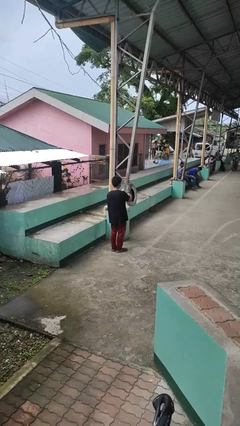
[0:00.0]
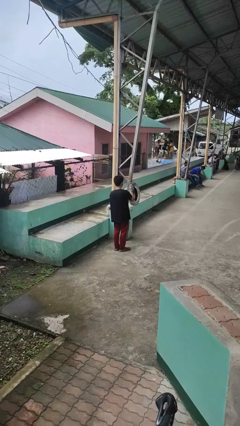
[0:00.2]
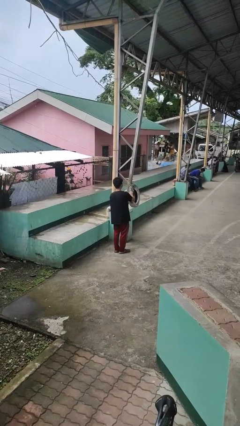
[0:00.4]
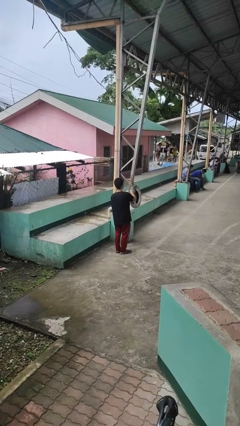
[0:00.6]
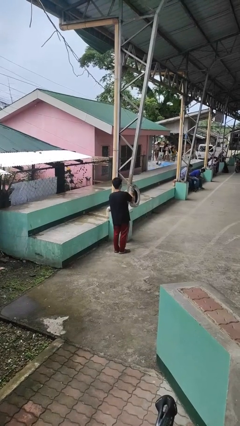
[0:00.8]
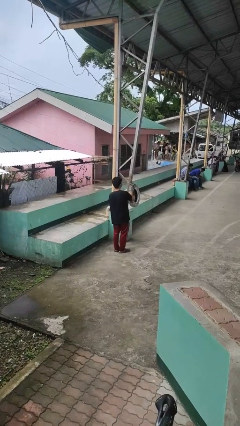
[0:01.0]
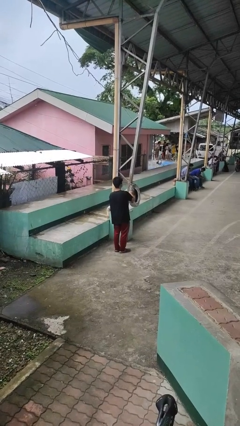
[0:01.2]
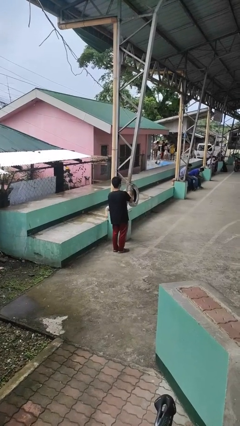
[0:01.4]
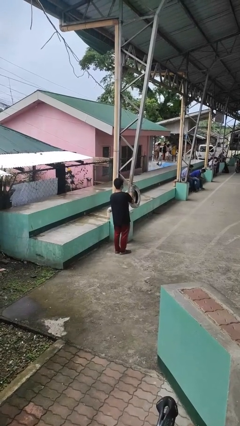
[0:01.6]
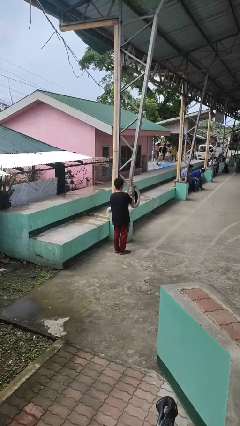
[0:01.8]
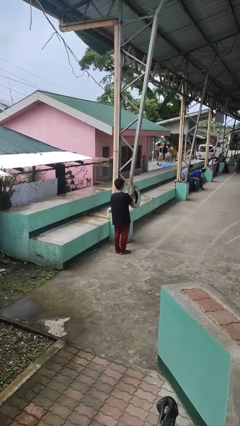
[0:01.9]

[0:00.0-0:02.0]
person taps object with finger

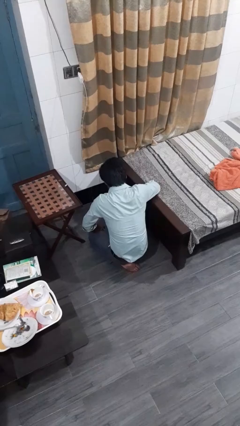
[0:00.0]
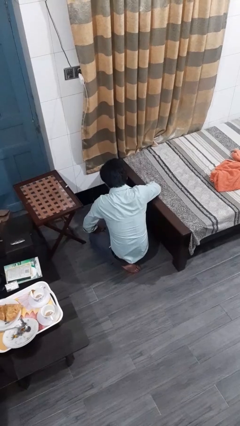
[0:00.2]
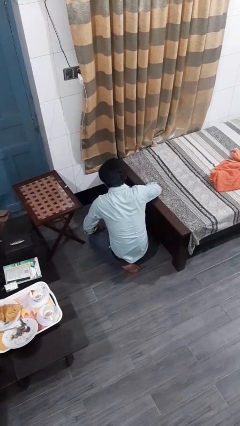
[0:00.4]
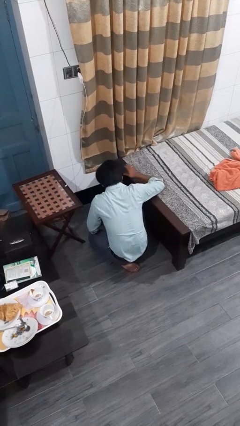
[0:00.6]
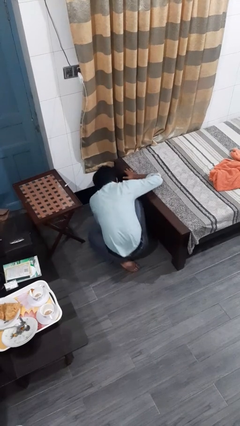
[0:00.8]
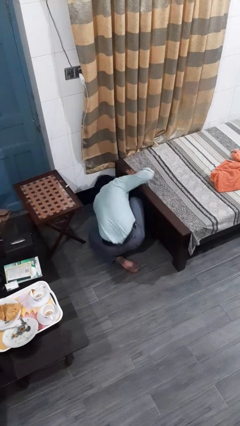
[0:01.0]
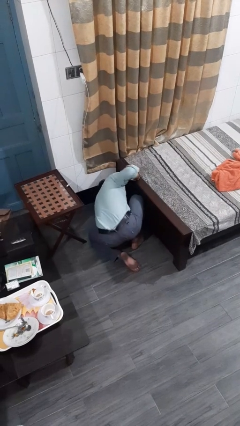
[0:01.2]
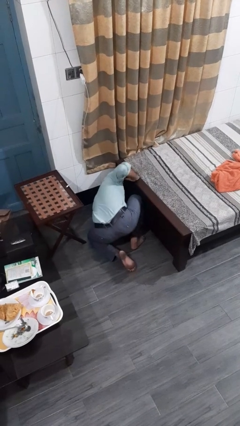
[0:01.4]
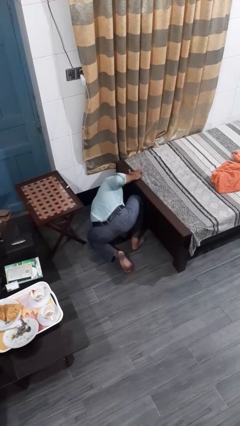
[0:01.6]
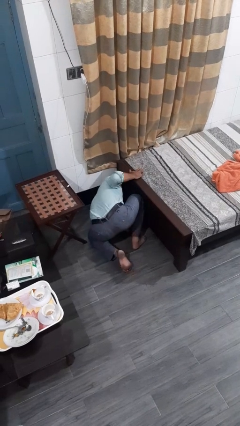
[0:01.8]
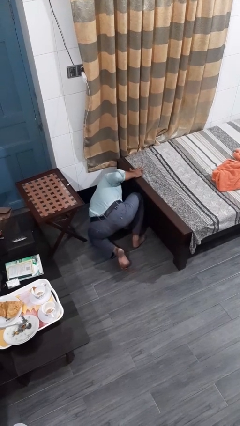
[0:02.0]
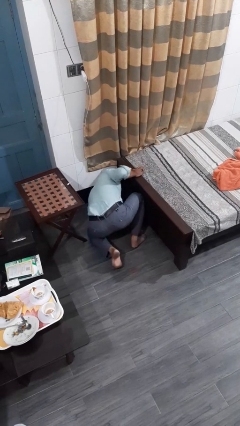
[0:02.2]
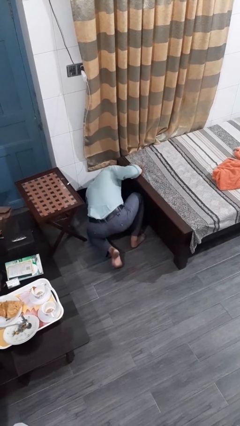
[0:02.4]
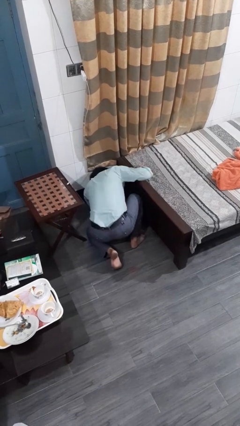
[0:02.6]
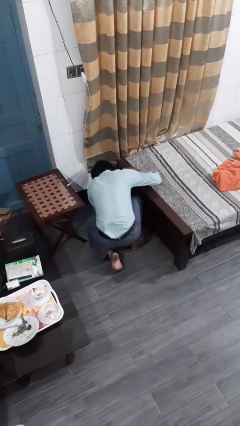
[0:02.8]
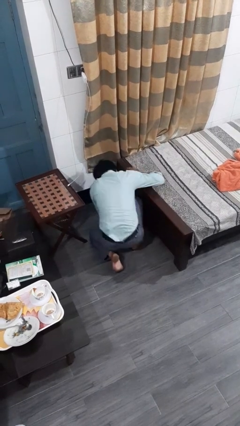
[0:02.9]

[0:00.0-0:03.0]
person searches under bed

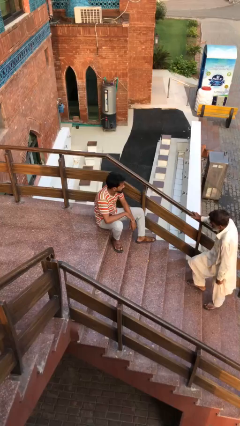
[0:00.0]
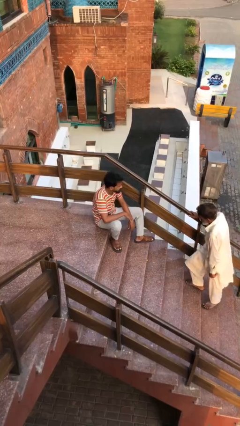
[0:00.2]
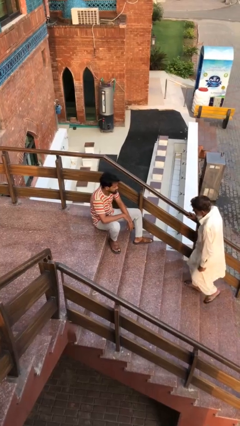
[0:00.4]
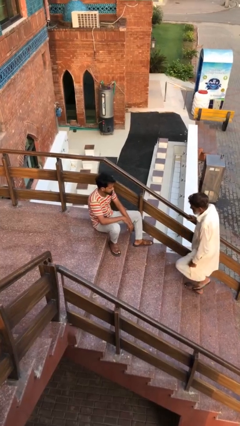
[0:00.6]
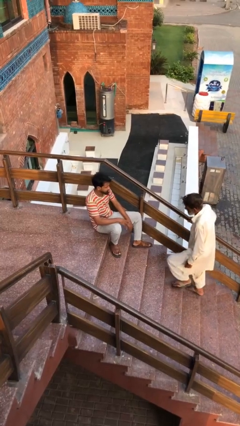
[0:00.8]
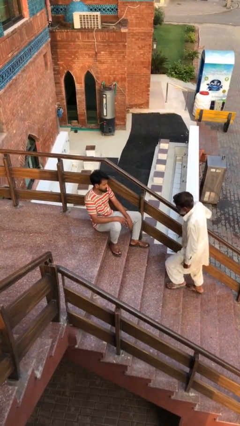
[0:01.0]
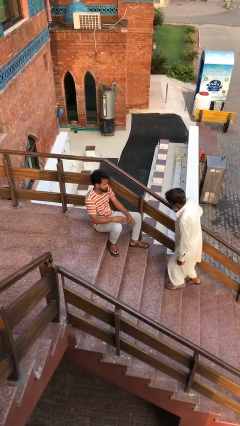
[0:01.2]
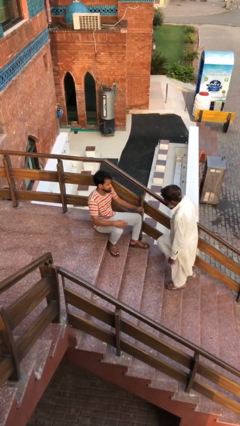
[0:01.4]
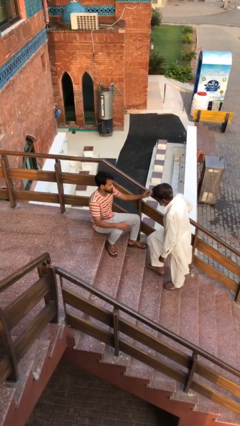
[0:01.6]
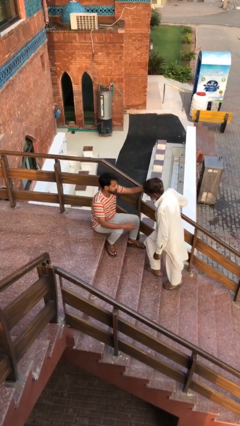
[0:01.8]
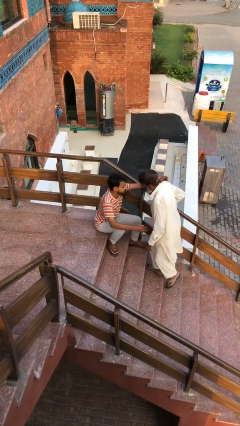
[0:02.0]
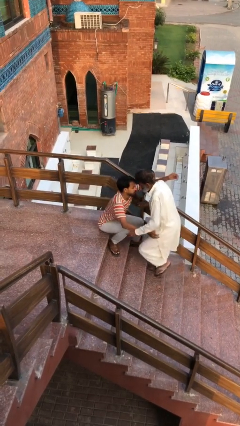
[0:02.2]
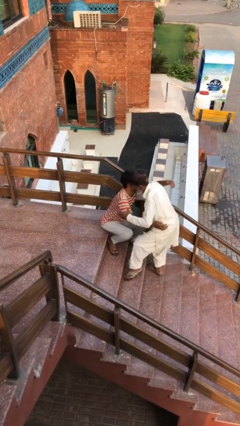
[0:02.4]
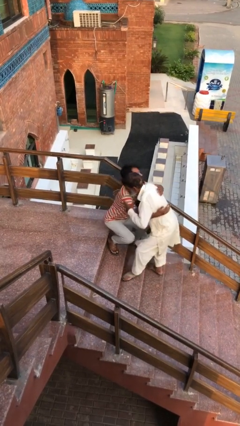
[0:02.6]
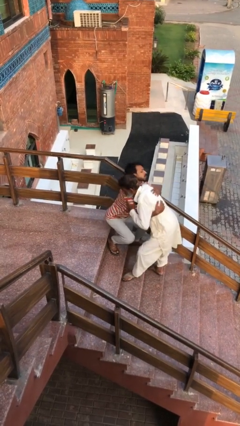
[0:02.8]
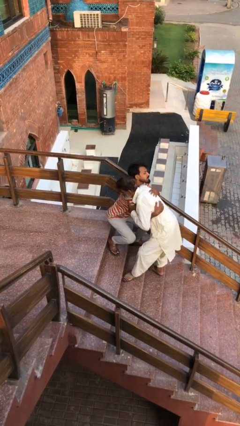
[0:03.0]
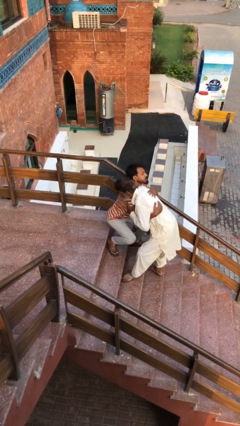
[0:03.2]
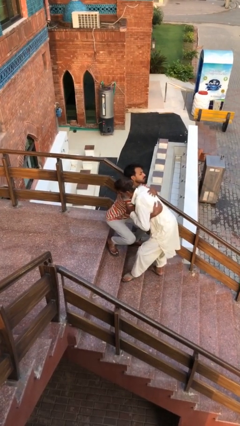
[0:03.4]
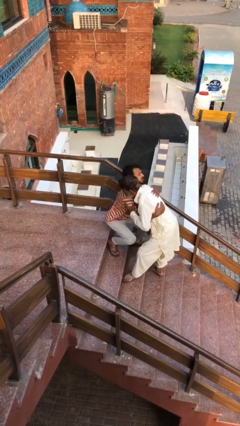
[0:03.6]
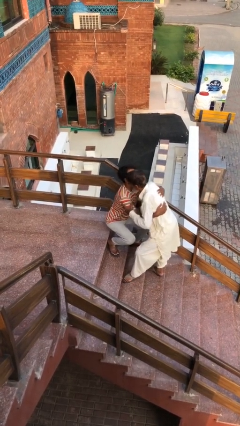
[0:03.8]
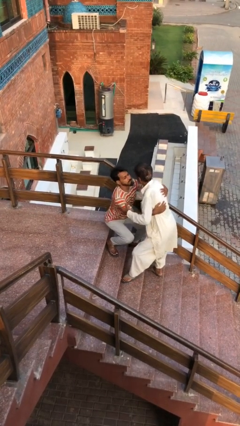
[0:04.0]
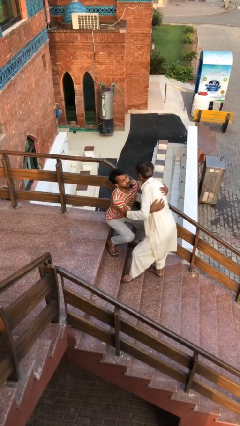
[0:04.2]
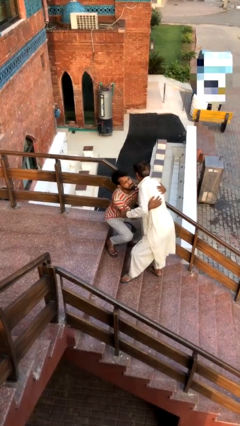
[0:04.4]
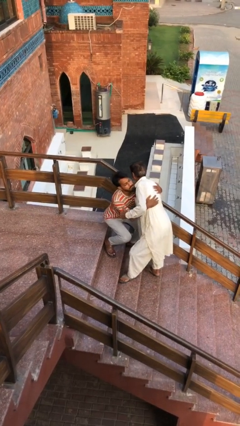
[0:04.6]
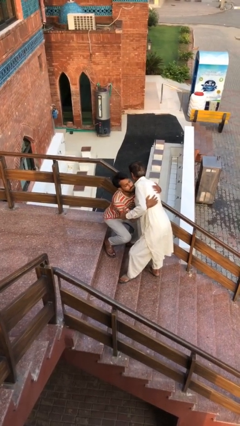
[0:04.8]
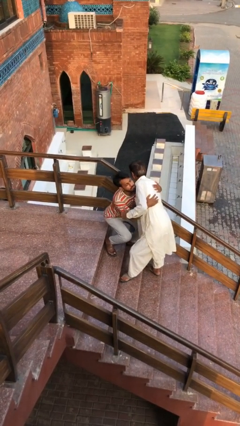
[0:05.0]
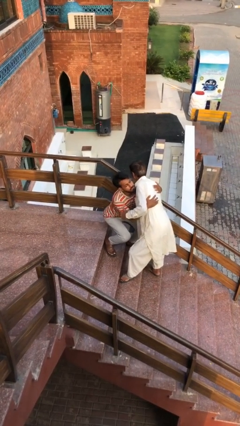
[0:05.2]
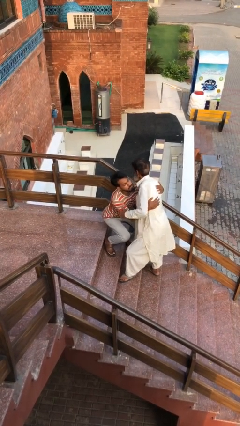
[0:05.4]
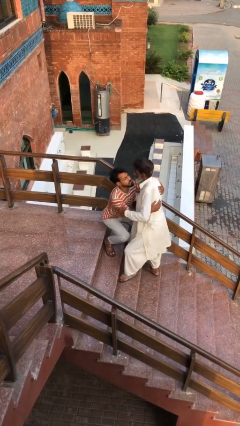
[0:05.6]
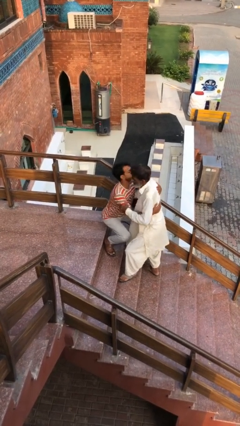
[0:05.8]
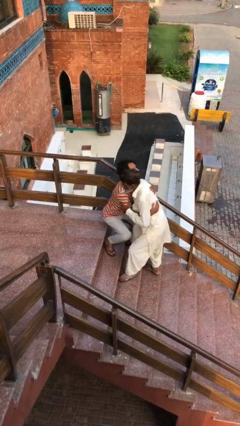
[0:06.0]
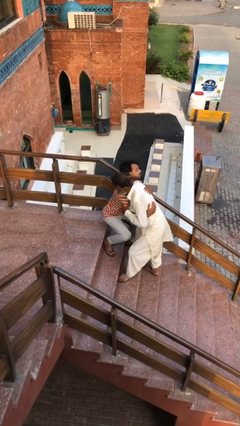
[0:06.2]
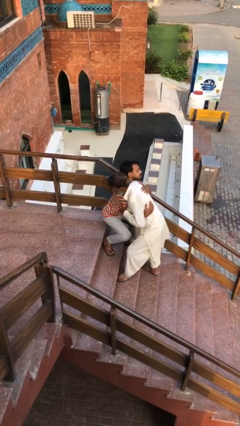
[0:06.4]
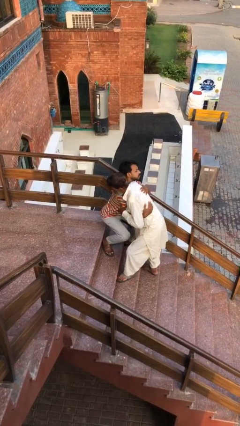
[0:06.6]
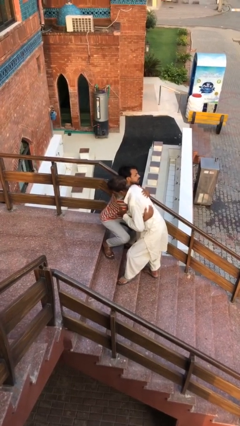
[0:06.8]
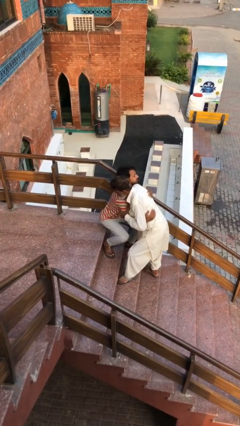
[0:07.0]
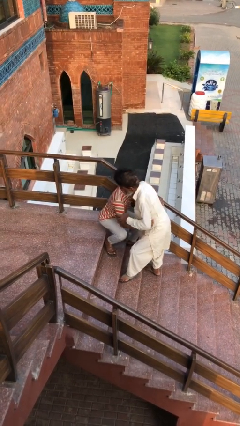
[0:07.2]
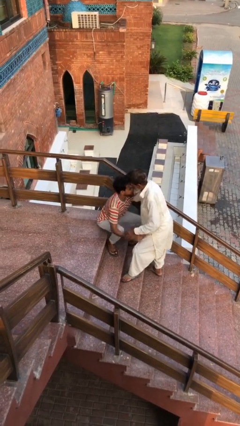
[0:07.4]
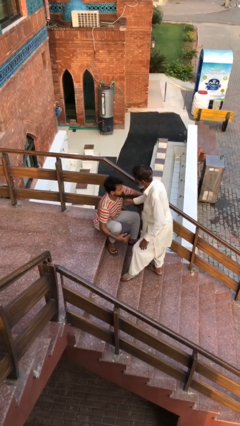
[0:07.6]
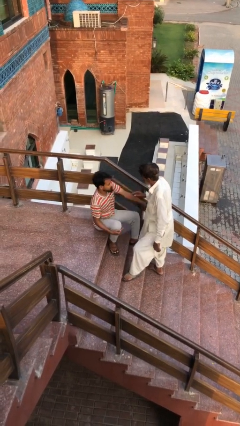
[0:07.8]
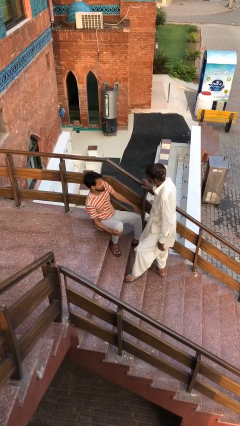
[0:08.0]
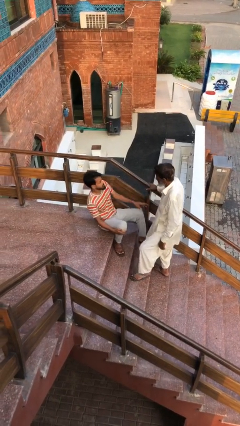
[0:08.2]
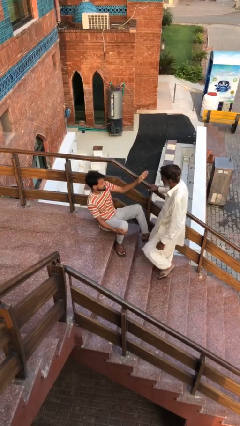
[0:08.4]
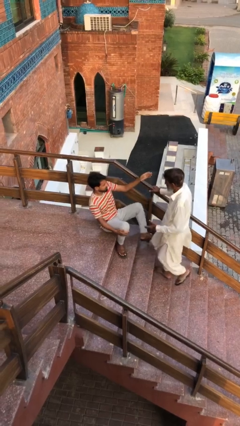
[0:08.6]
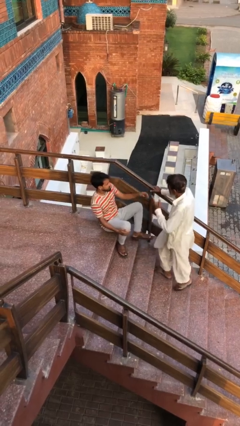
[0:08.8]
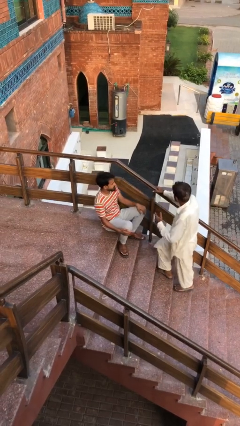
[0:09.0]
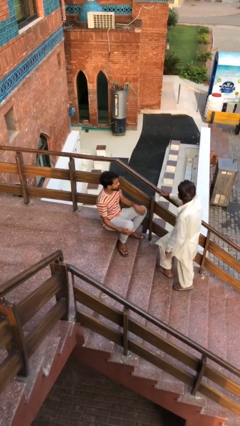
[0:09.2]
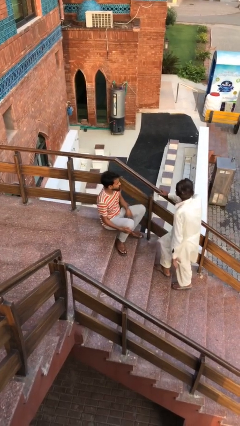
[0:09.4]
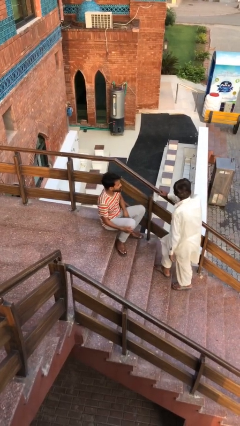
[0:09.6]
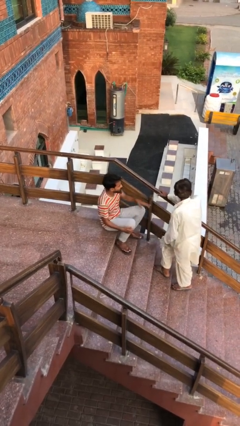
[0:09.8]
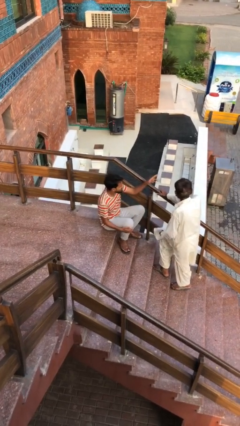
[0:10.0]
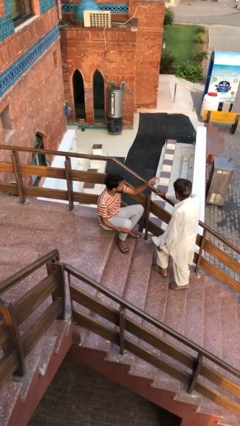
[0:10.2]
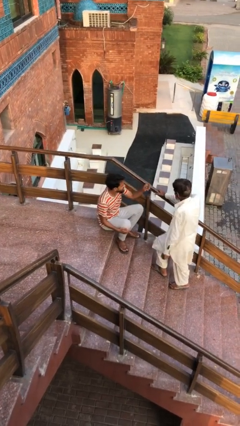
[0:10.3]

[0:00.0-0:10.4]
person embraces person

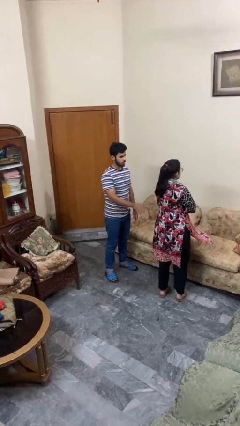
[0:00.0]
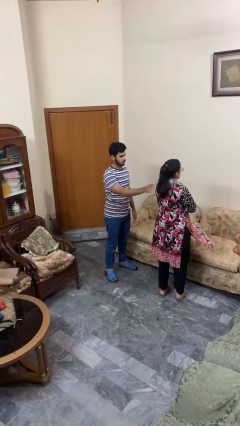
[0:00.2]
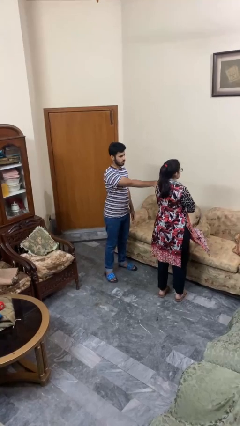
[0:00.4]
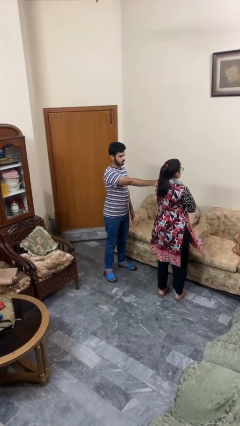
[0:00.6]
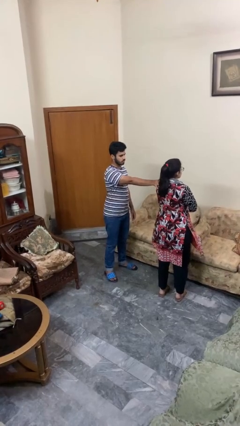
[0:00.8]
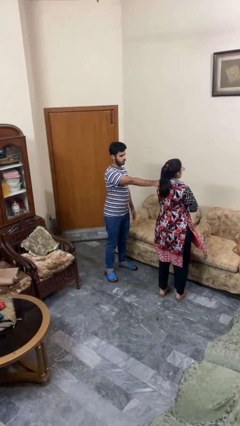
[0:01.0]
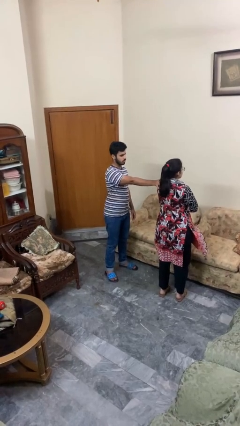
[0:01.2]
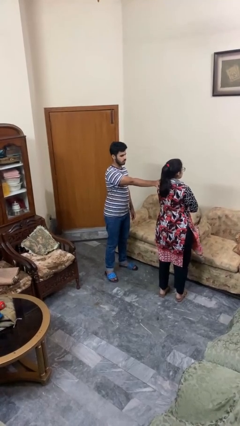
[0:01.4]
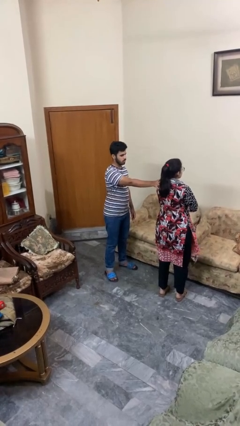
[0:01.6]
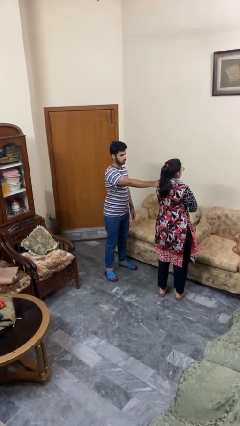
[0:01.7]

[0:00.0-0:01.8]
person grabs person by shoulder

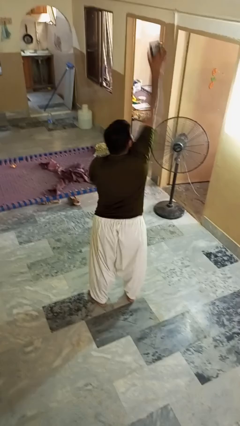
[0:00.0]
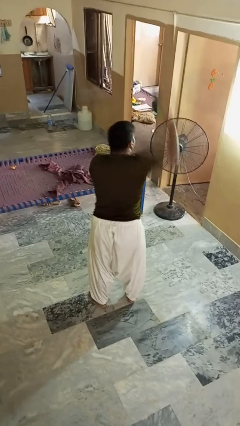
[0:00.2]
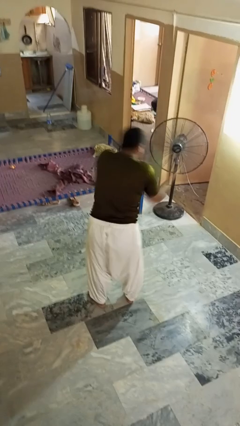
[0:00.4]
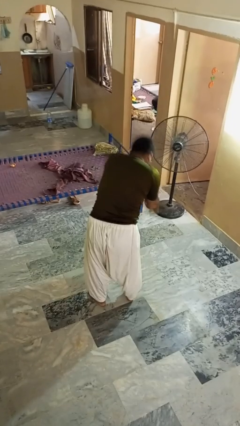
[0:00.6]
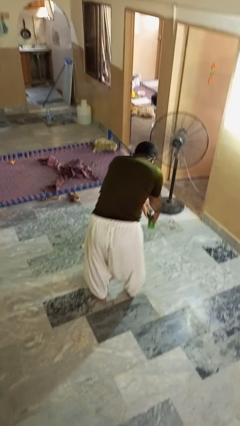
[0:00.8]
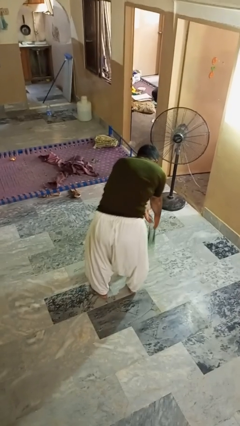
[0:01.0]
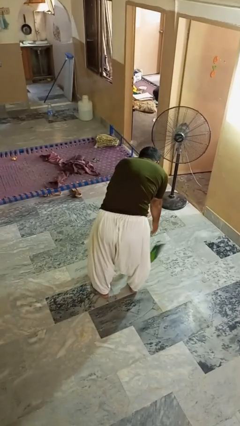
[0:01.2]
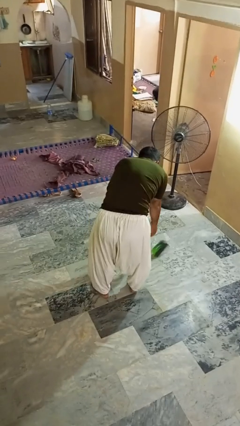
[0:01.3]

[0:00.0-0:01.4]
person catches dropped object
